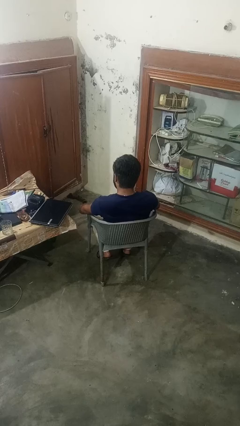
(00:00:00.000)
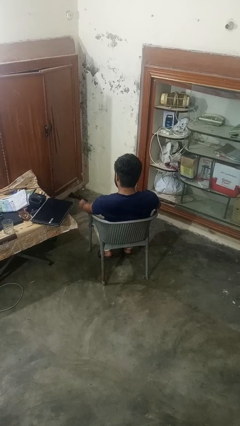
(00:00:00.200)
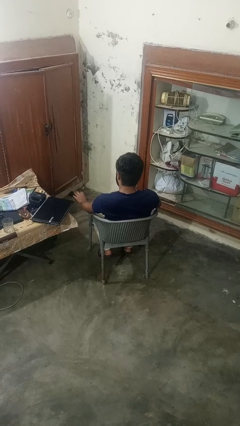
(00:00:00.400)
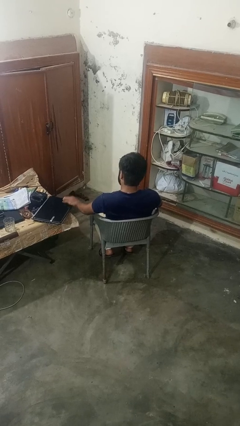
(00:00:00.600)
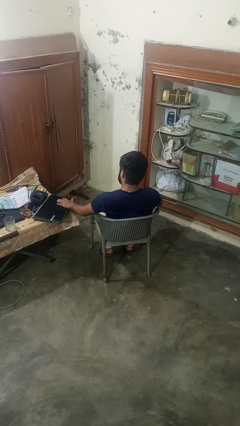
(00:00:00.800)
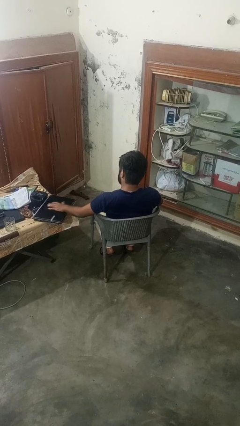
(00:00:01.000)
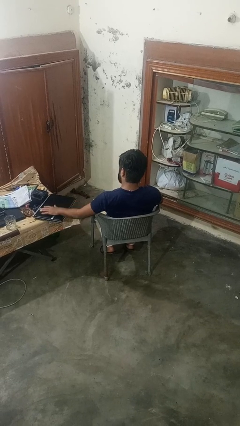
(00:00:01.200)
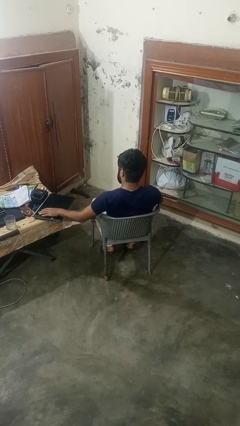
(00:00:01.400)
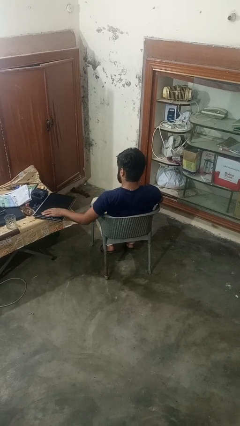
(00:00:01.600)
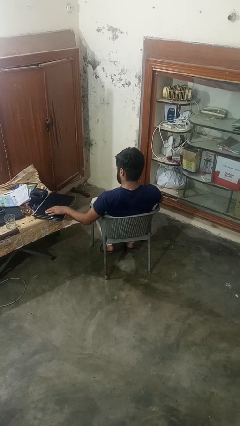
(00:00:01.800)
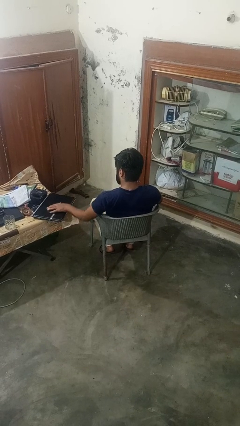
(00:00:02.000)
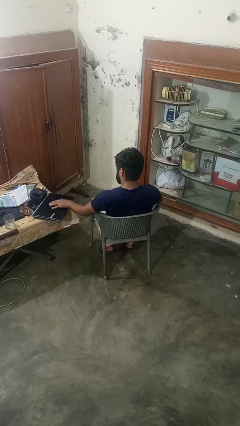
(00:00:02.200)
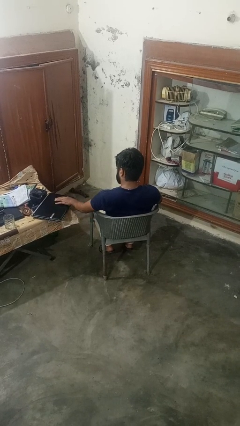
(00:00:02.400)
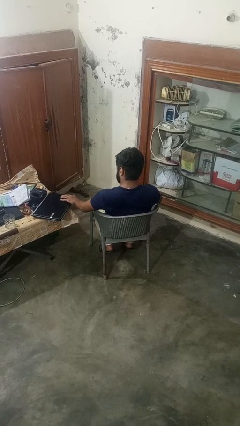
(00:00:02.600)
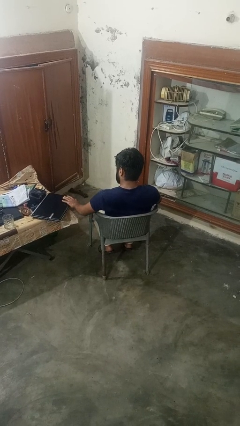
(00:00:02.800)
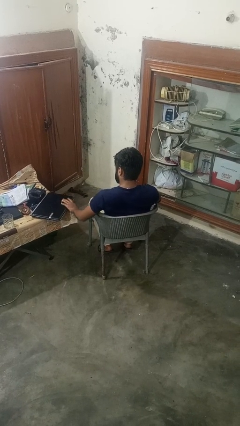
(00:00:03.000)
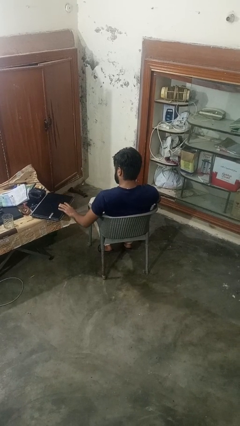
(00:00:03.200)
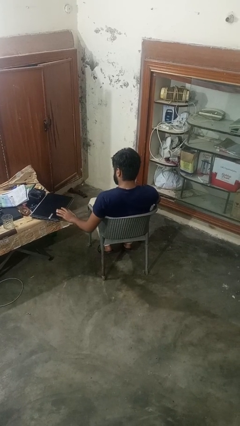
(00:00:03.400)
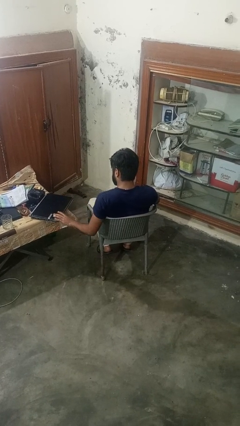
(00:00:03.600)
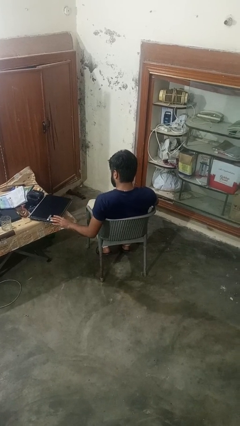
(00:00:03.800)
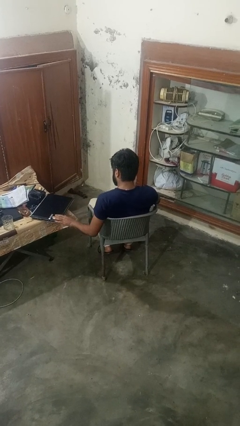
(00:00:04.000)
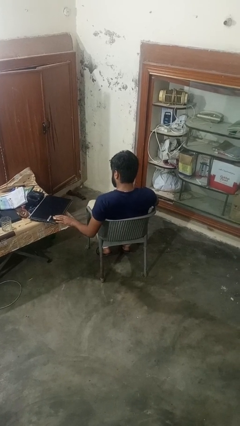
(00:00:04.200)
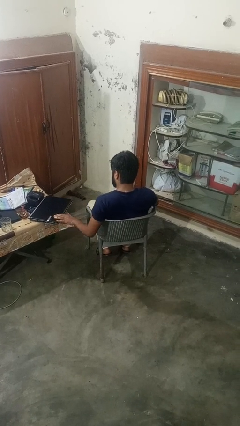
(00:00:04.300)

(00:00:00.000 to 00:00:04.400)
person waves hand over object

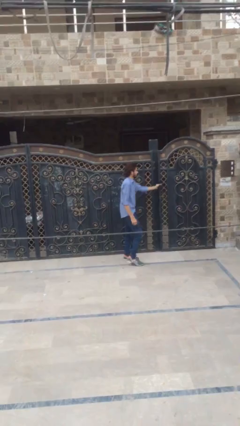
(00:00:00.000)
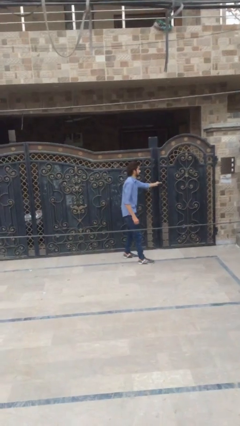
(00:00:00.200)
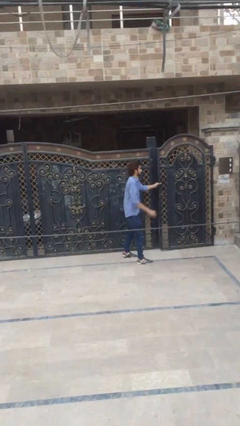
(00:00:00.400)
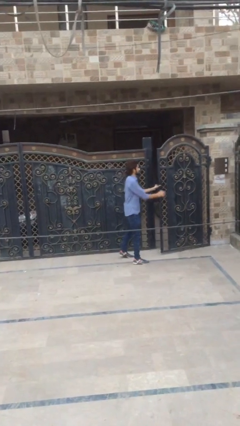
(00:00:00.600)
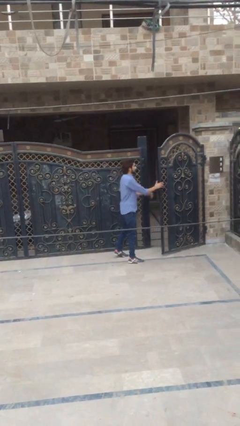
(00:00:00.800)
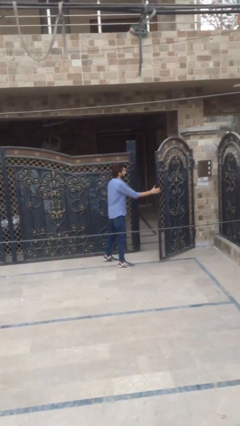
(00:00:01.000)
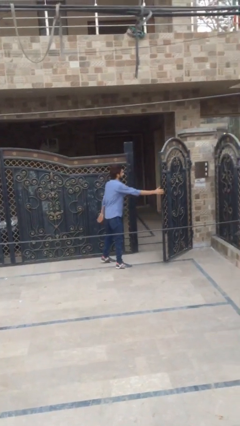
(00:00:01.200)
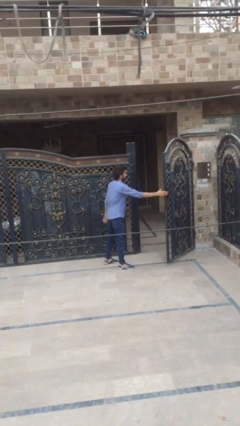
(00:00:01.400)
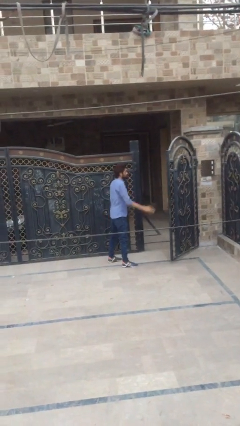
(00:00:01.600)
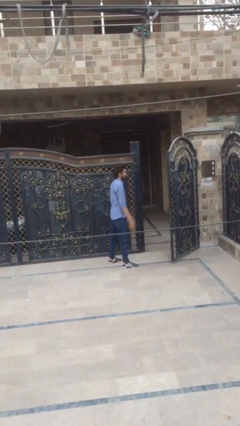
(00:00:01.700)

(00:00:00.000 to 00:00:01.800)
person opens facility door

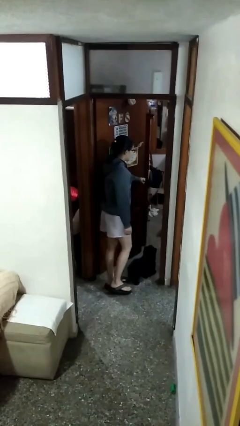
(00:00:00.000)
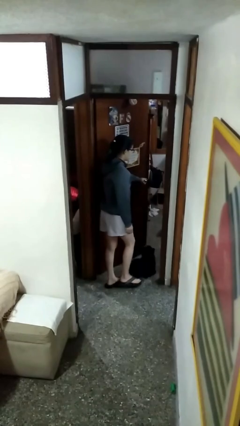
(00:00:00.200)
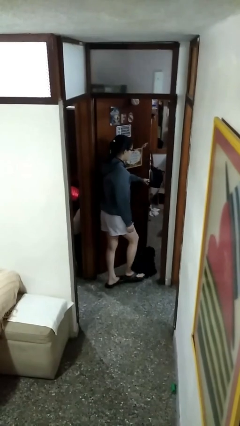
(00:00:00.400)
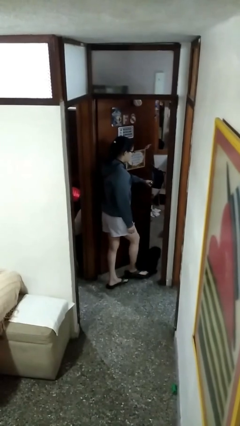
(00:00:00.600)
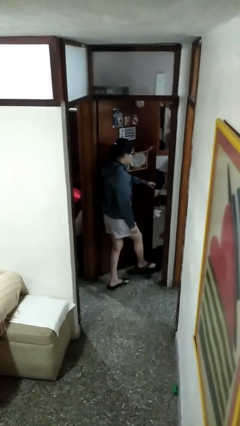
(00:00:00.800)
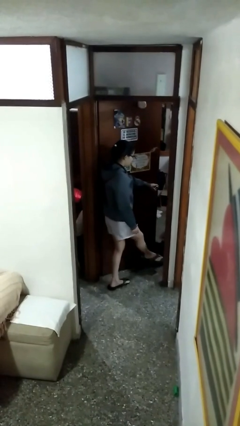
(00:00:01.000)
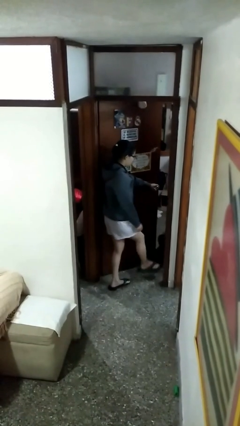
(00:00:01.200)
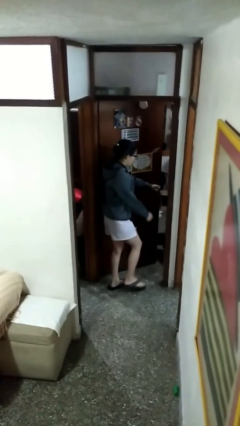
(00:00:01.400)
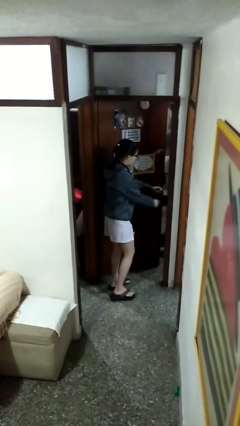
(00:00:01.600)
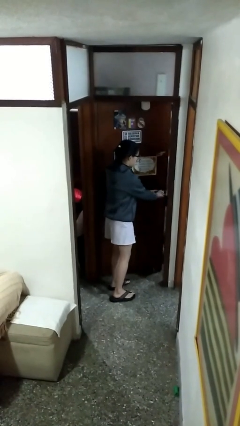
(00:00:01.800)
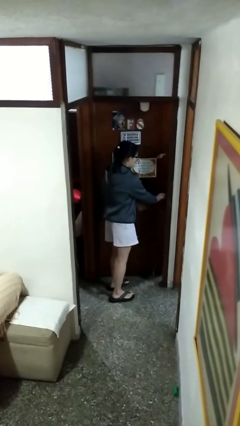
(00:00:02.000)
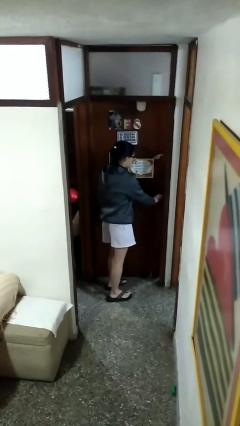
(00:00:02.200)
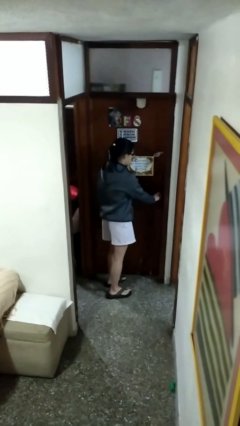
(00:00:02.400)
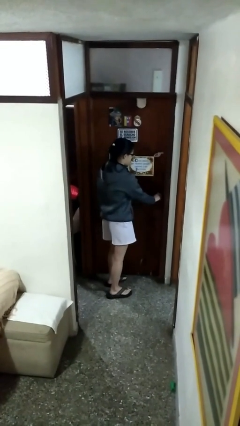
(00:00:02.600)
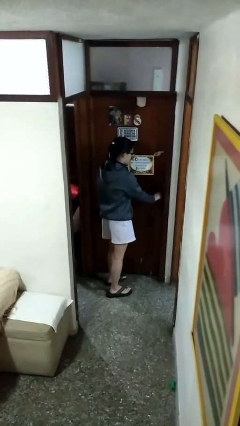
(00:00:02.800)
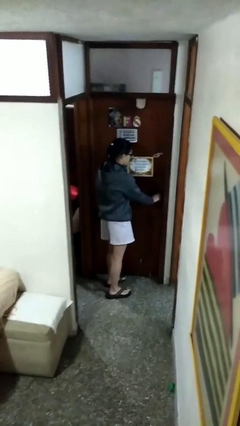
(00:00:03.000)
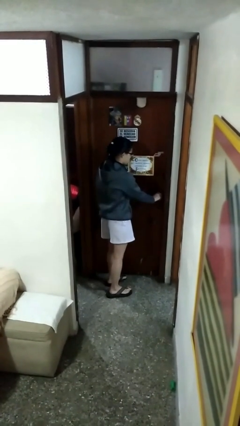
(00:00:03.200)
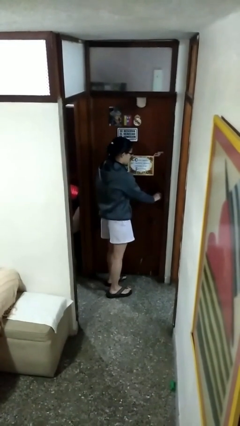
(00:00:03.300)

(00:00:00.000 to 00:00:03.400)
person closes facility door

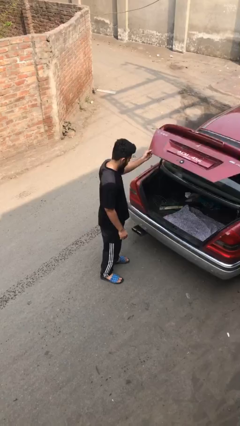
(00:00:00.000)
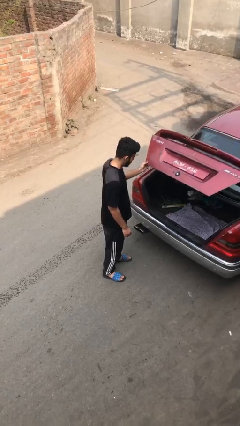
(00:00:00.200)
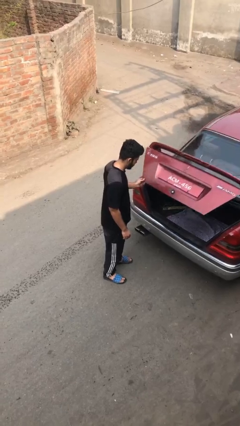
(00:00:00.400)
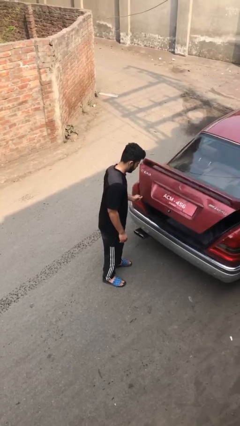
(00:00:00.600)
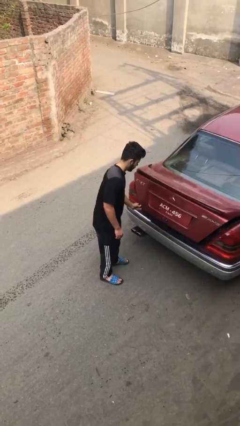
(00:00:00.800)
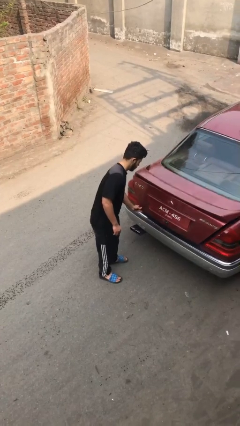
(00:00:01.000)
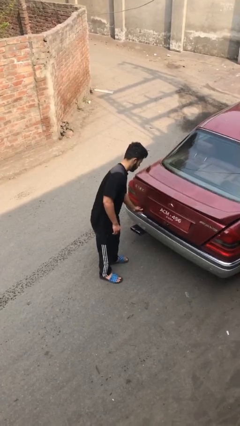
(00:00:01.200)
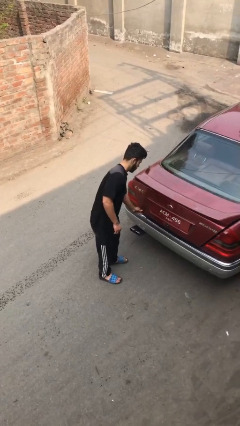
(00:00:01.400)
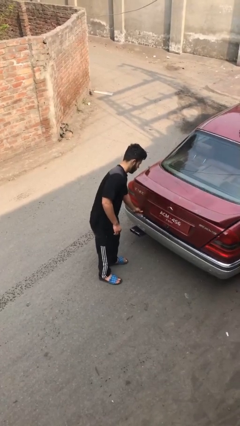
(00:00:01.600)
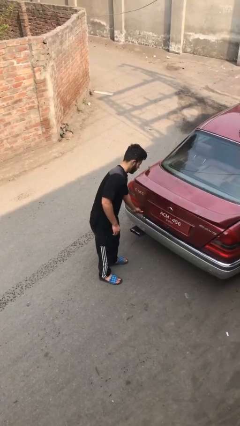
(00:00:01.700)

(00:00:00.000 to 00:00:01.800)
person closes car trunk

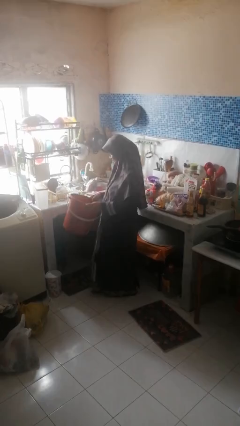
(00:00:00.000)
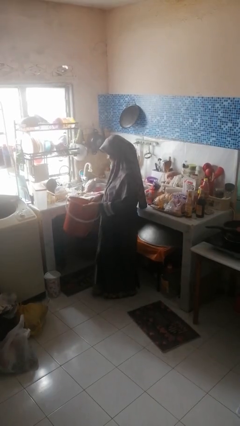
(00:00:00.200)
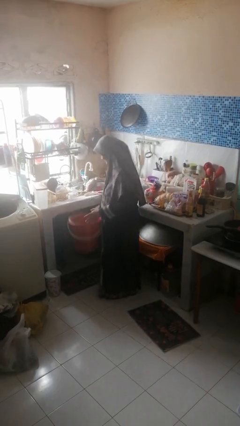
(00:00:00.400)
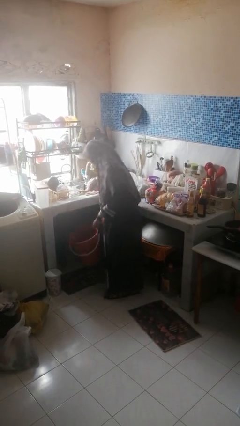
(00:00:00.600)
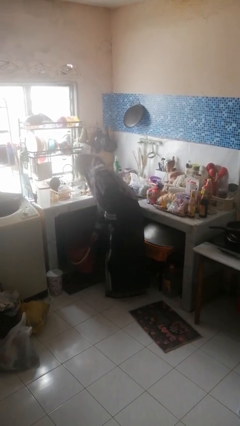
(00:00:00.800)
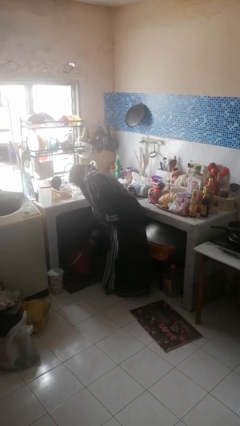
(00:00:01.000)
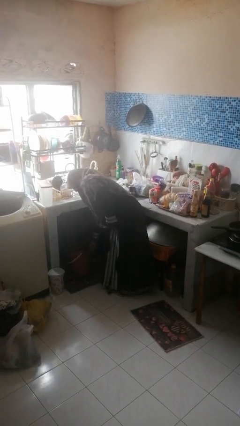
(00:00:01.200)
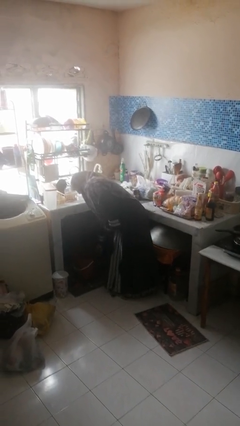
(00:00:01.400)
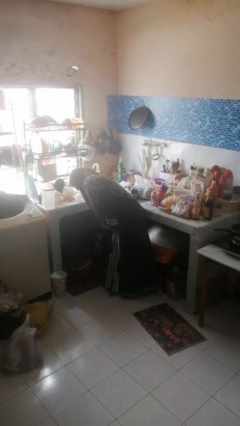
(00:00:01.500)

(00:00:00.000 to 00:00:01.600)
person puts down object into cabinet

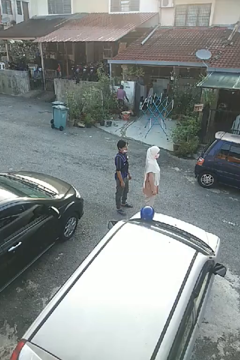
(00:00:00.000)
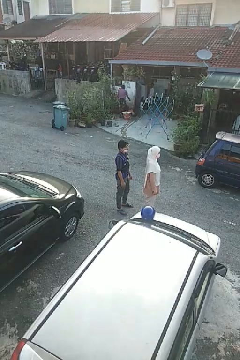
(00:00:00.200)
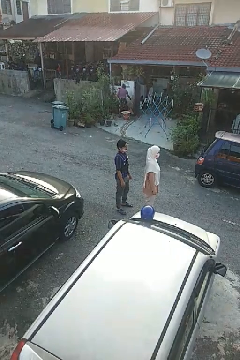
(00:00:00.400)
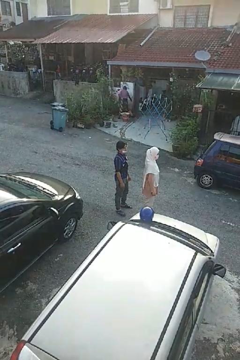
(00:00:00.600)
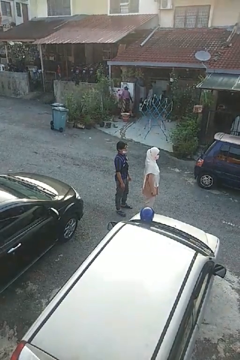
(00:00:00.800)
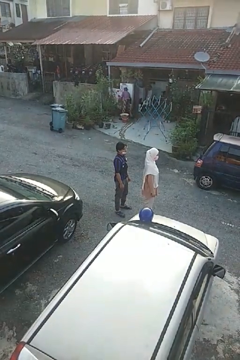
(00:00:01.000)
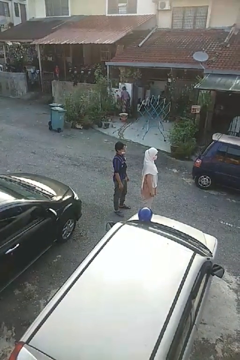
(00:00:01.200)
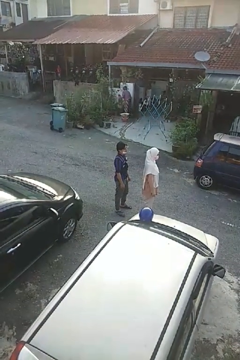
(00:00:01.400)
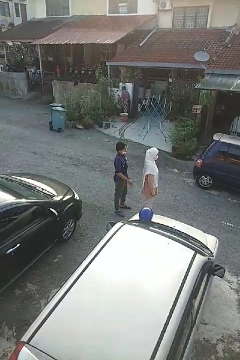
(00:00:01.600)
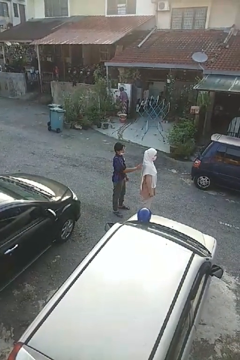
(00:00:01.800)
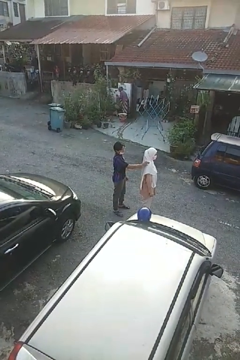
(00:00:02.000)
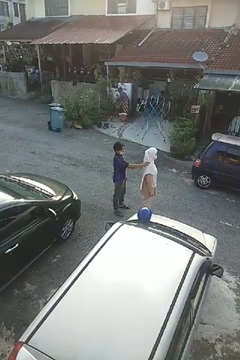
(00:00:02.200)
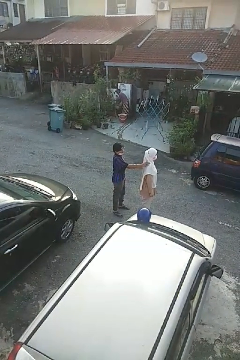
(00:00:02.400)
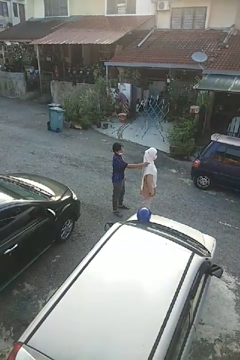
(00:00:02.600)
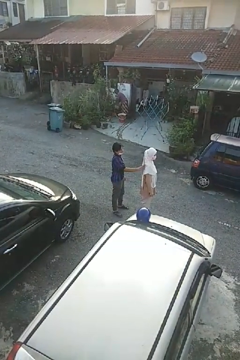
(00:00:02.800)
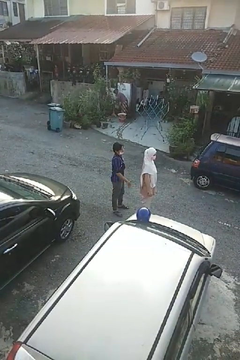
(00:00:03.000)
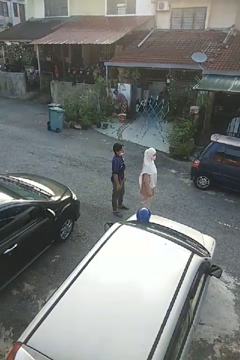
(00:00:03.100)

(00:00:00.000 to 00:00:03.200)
person touches back of person

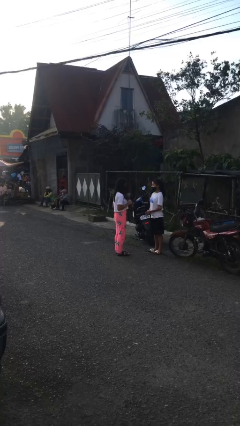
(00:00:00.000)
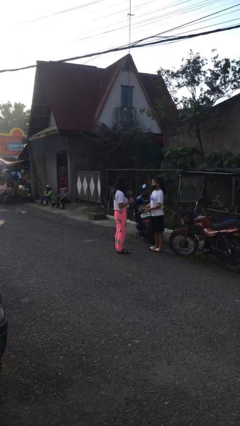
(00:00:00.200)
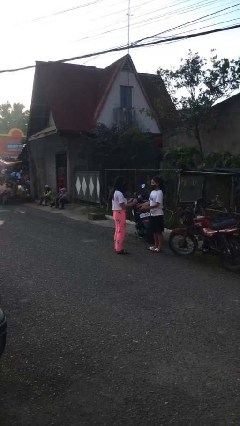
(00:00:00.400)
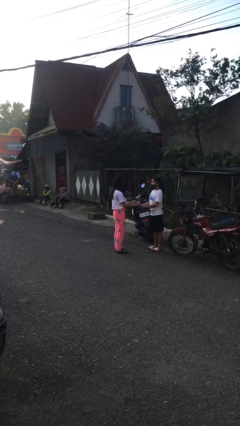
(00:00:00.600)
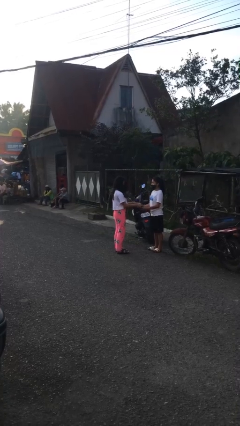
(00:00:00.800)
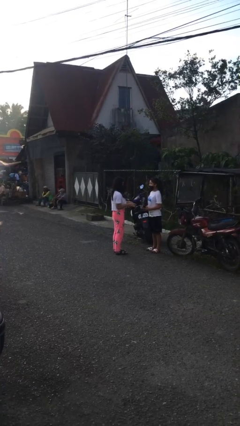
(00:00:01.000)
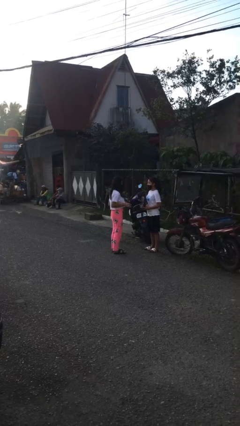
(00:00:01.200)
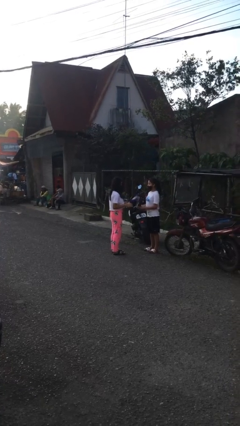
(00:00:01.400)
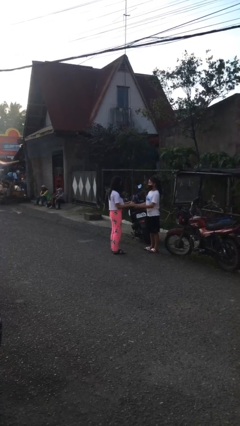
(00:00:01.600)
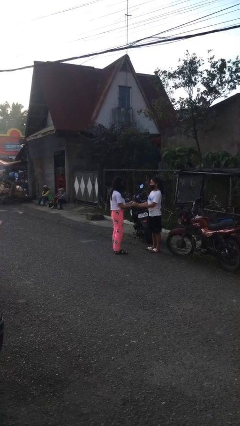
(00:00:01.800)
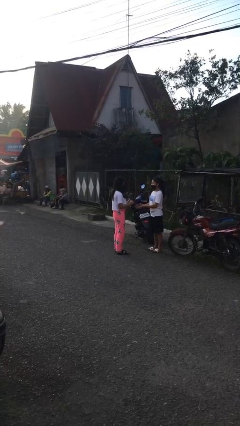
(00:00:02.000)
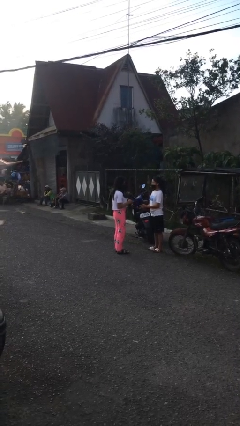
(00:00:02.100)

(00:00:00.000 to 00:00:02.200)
person transfers object to person
